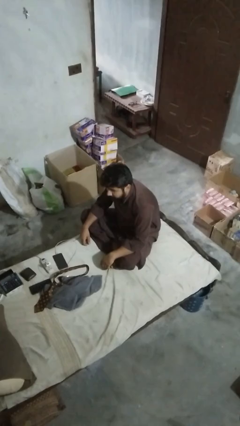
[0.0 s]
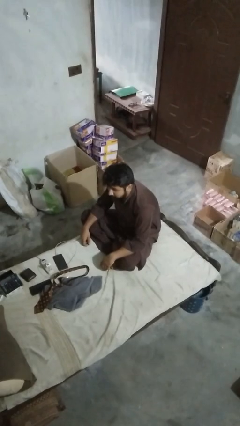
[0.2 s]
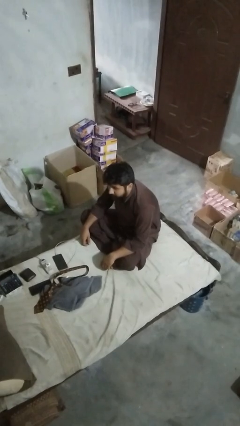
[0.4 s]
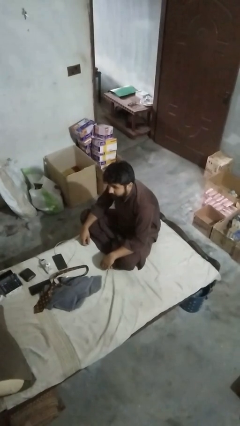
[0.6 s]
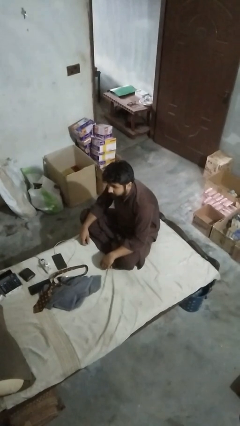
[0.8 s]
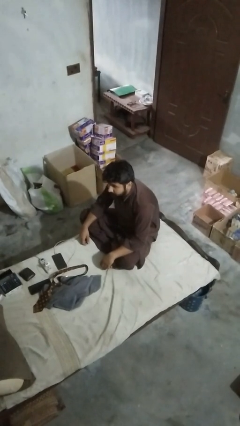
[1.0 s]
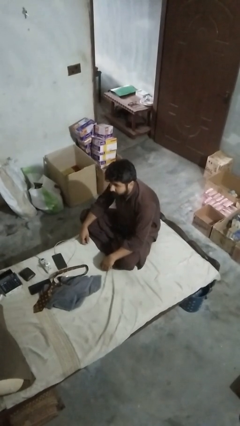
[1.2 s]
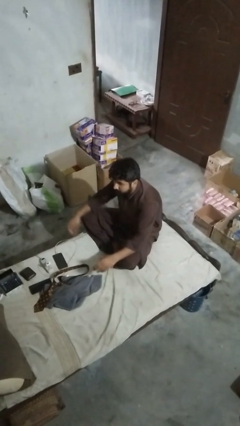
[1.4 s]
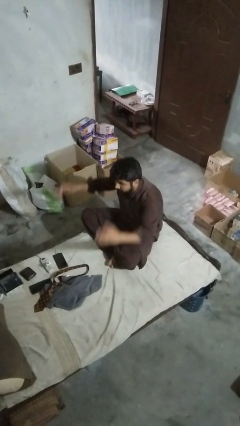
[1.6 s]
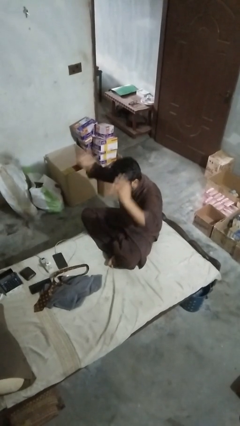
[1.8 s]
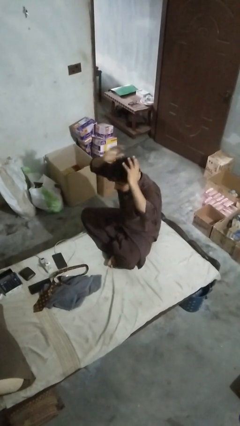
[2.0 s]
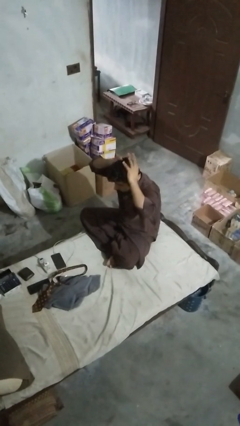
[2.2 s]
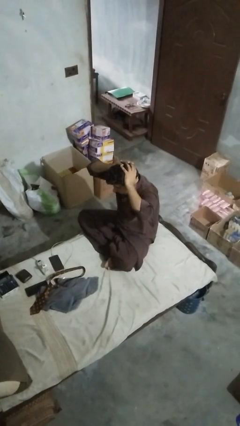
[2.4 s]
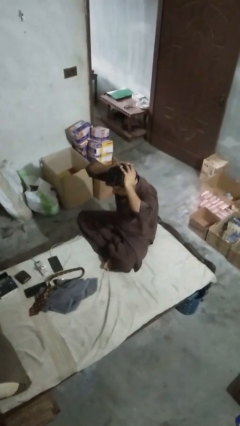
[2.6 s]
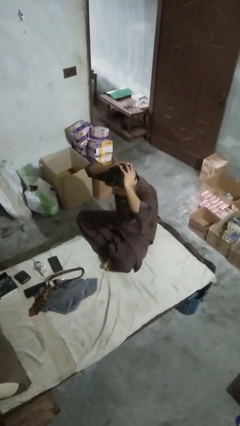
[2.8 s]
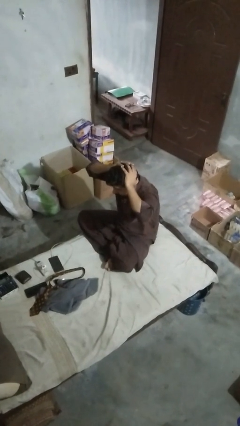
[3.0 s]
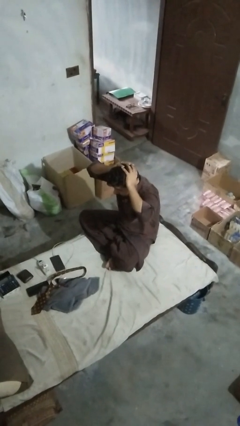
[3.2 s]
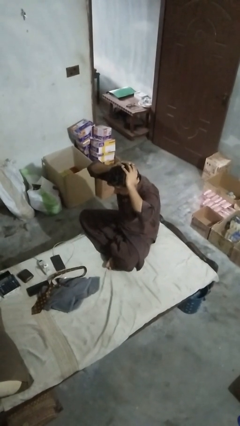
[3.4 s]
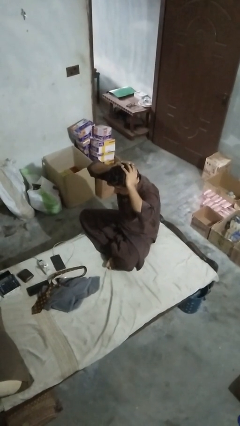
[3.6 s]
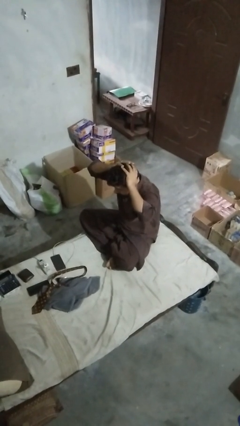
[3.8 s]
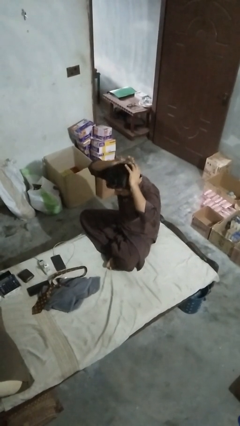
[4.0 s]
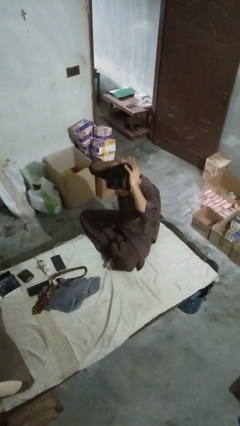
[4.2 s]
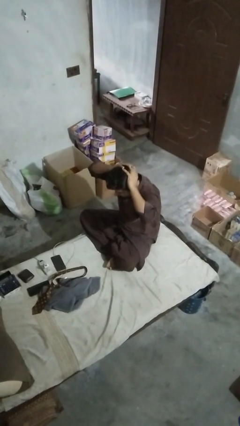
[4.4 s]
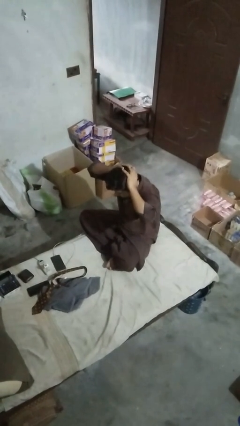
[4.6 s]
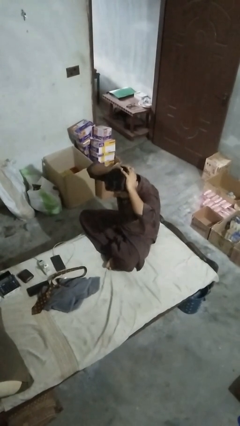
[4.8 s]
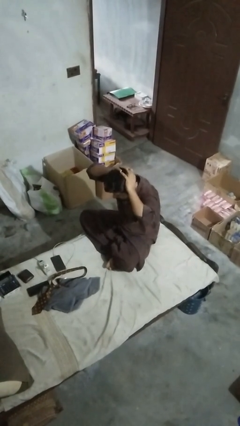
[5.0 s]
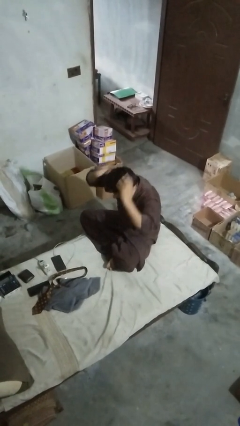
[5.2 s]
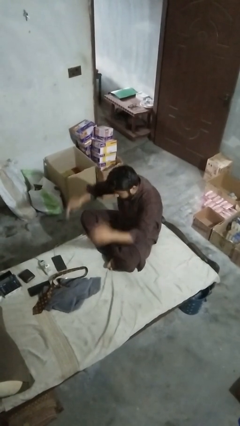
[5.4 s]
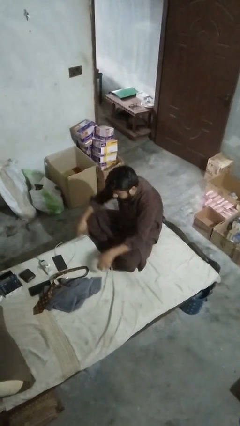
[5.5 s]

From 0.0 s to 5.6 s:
person pats head

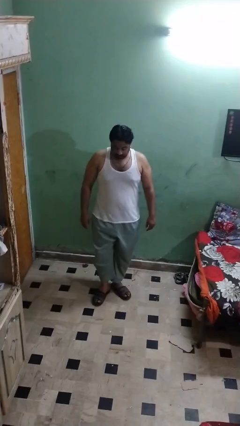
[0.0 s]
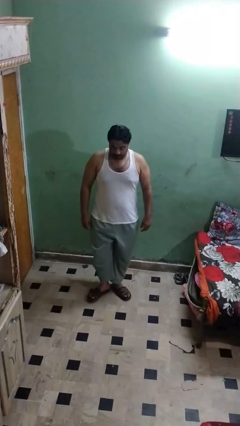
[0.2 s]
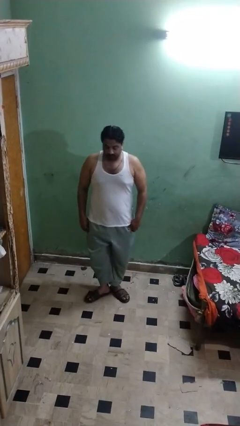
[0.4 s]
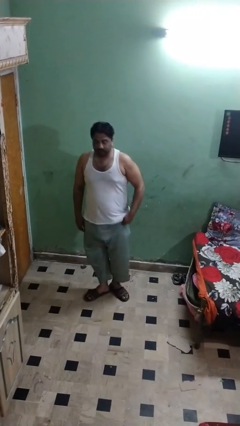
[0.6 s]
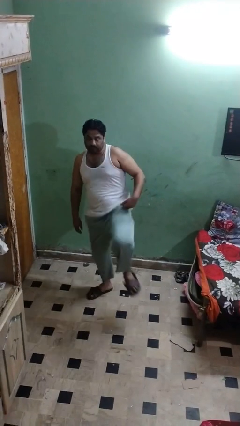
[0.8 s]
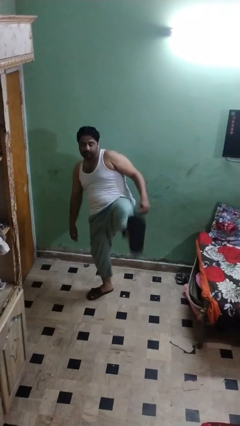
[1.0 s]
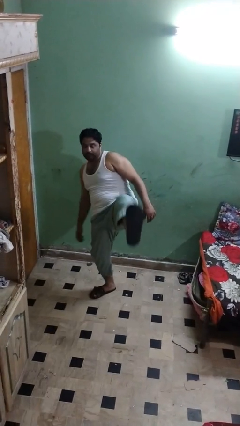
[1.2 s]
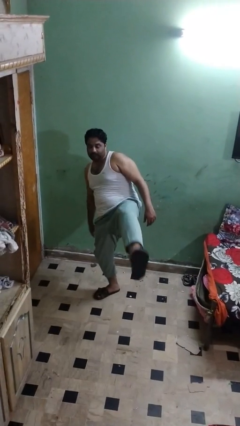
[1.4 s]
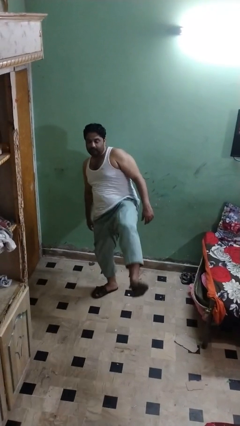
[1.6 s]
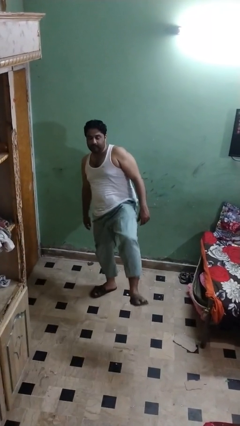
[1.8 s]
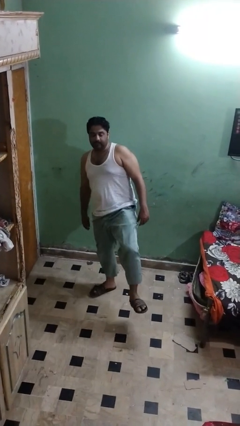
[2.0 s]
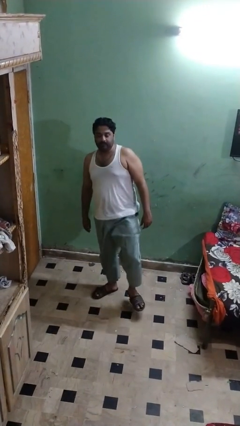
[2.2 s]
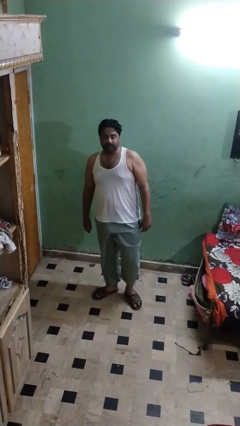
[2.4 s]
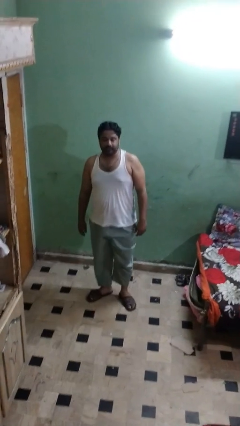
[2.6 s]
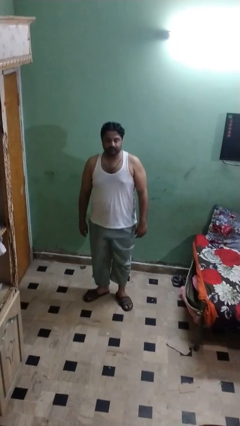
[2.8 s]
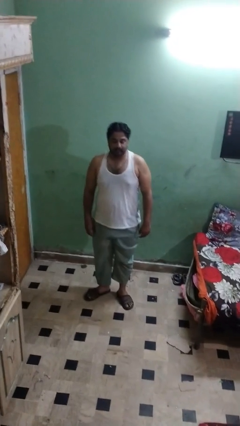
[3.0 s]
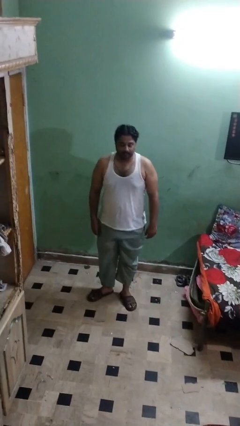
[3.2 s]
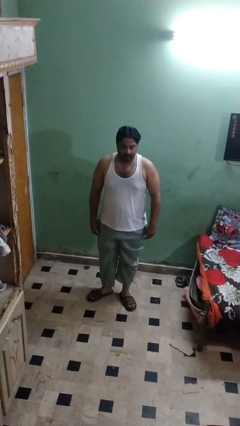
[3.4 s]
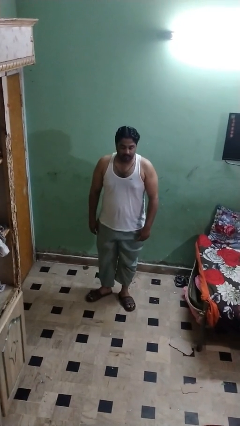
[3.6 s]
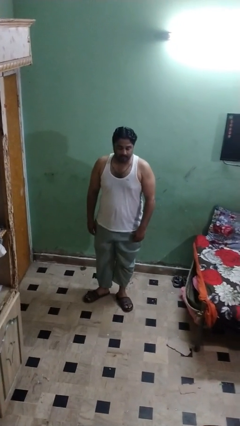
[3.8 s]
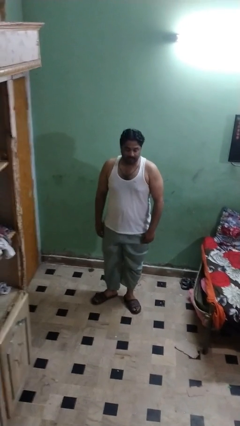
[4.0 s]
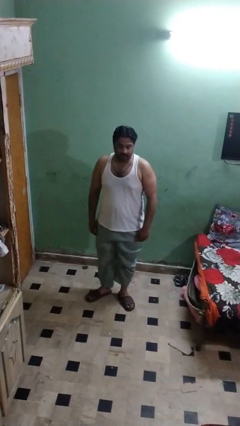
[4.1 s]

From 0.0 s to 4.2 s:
person karate kicks

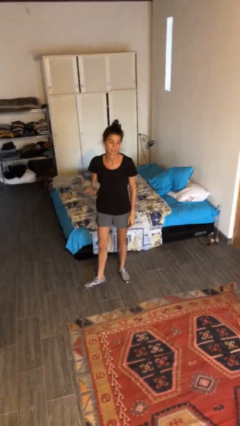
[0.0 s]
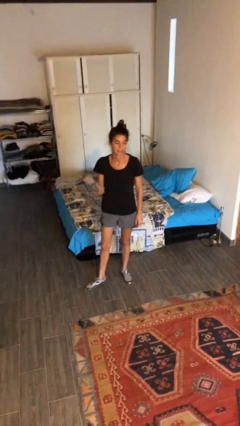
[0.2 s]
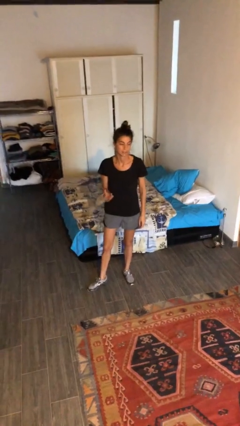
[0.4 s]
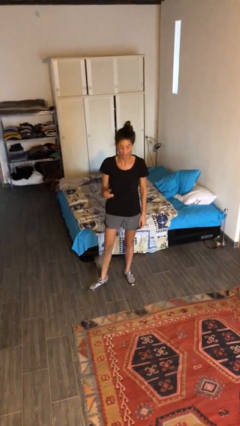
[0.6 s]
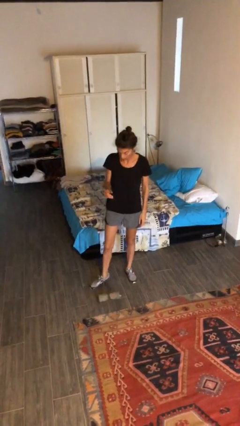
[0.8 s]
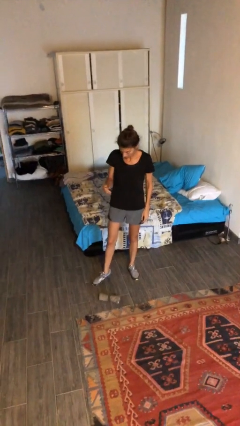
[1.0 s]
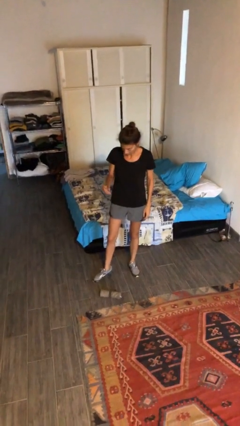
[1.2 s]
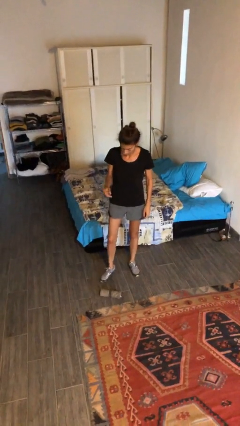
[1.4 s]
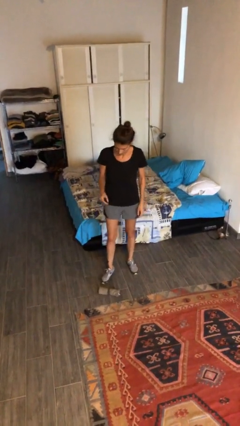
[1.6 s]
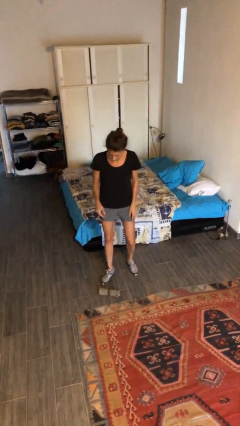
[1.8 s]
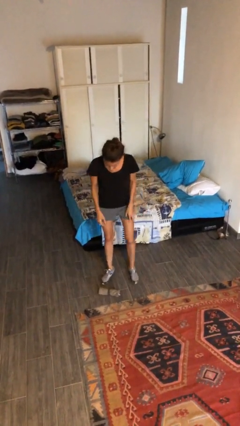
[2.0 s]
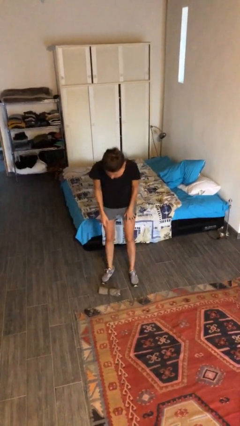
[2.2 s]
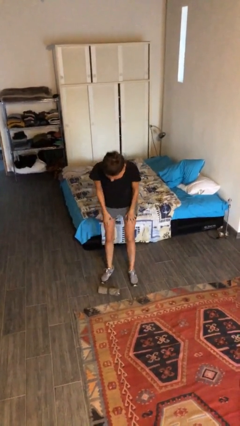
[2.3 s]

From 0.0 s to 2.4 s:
person drops object

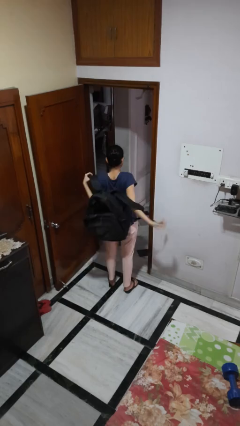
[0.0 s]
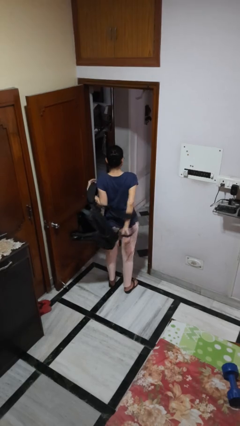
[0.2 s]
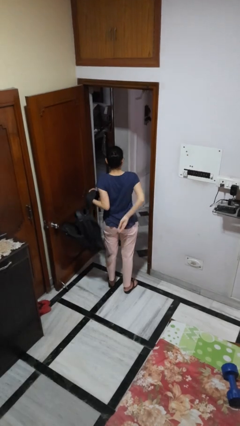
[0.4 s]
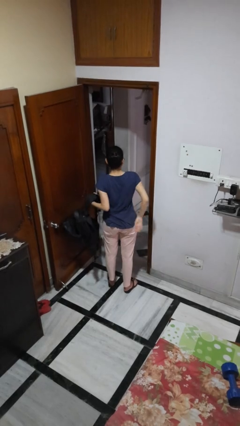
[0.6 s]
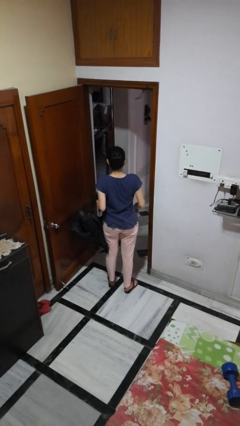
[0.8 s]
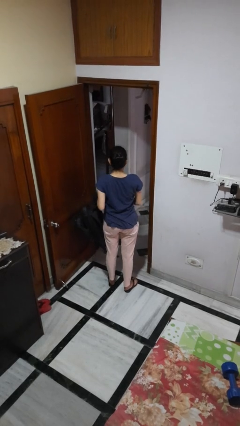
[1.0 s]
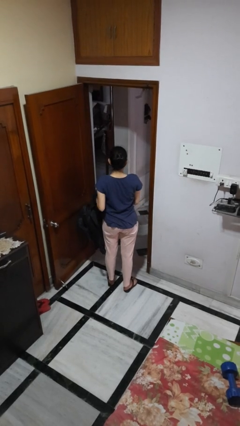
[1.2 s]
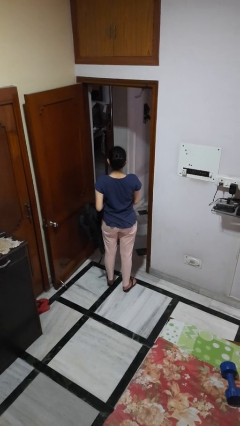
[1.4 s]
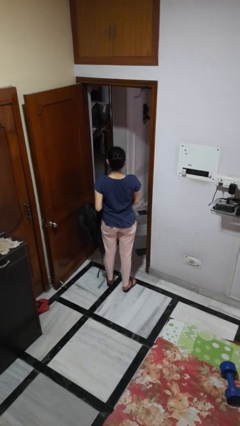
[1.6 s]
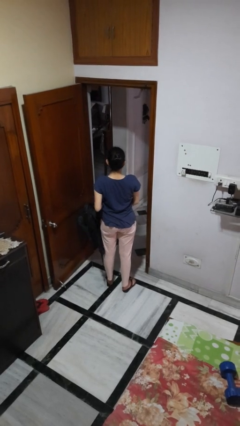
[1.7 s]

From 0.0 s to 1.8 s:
person takes off backpack

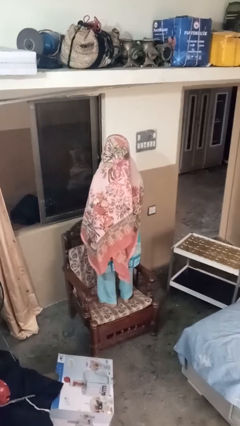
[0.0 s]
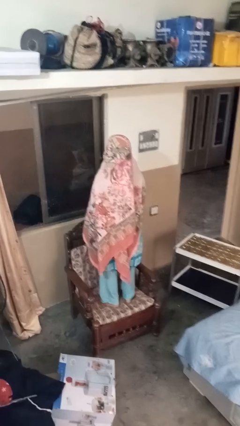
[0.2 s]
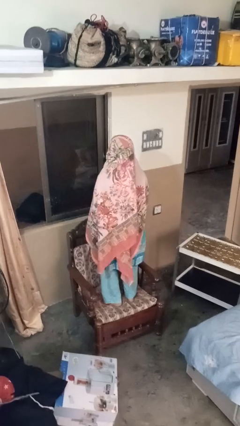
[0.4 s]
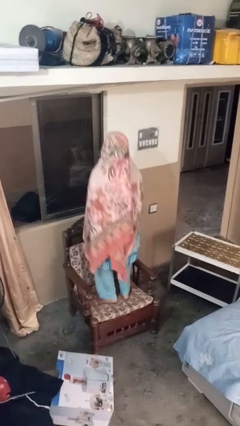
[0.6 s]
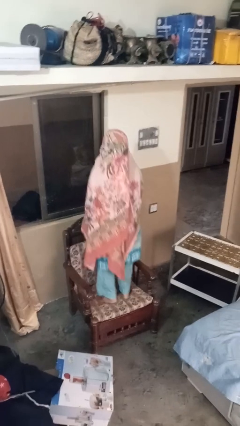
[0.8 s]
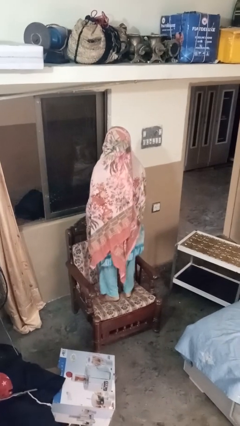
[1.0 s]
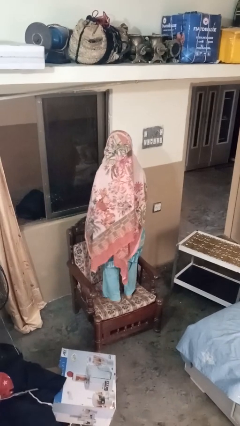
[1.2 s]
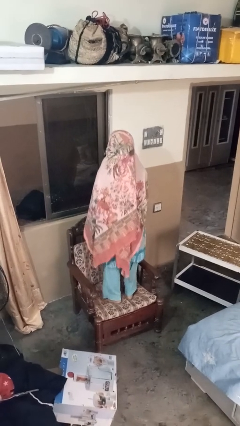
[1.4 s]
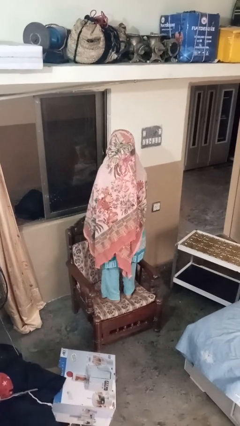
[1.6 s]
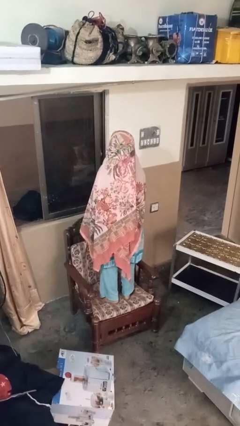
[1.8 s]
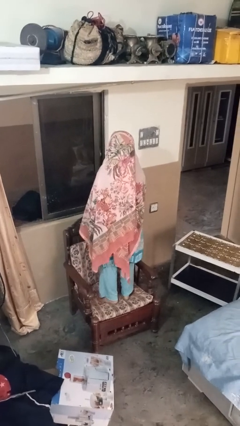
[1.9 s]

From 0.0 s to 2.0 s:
person jumps on couch

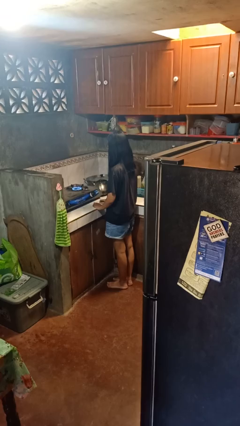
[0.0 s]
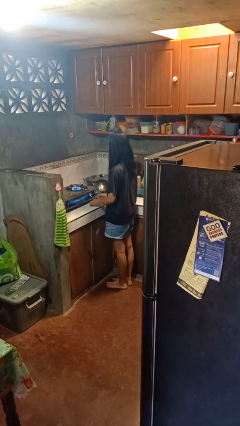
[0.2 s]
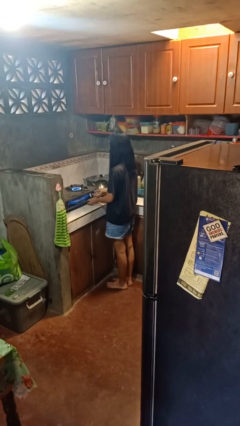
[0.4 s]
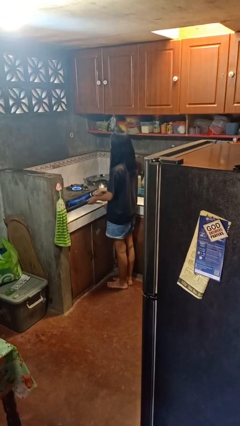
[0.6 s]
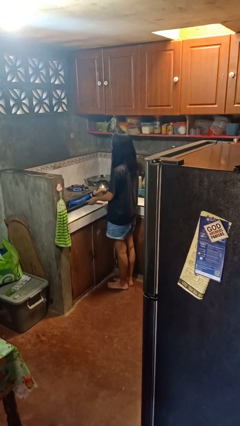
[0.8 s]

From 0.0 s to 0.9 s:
person turns off stovetop

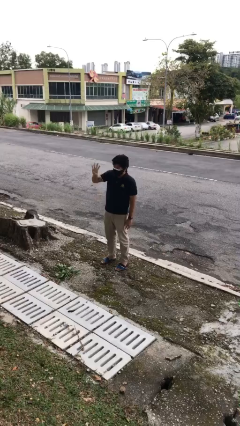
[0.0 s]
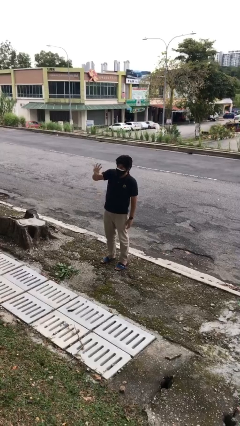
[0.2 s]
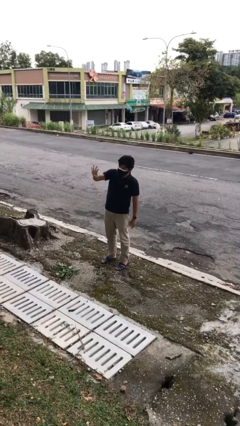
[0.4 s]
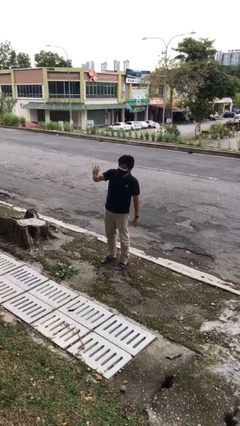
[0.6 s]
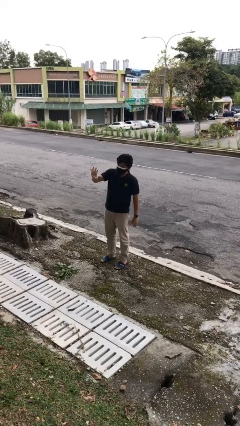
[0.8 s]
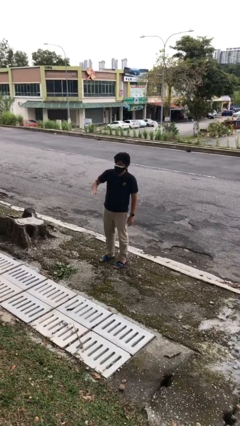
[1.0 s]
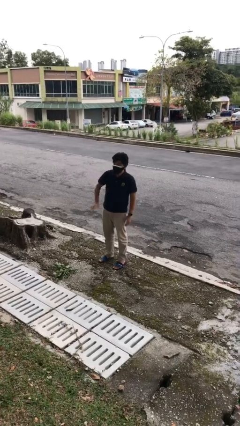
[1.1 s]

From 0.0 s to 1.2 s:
person gestures number four
